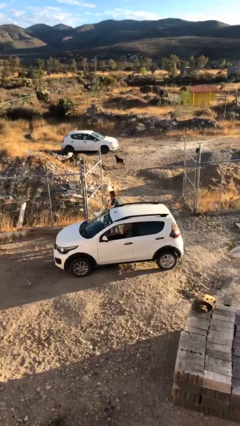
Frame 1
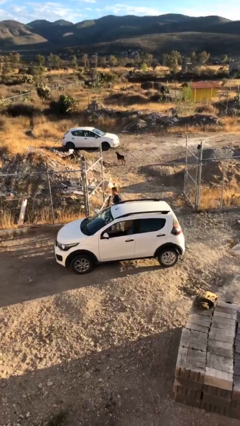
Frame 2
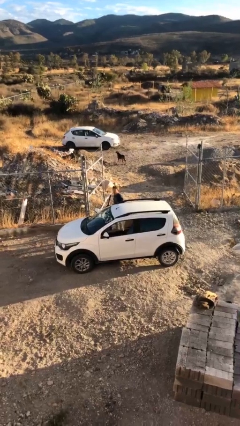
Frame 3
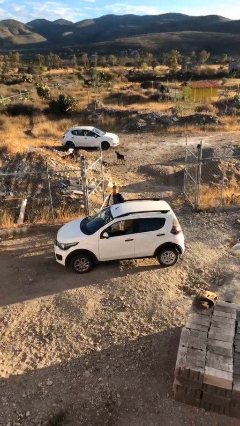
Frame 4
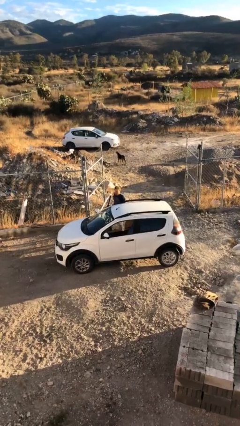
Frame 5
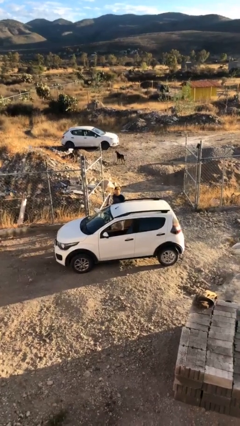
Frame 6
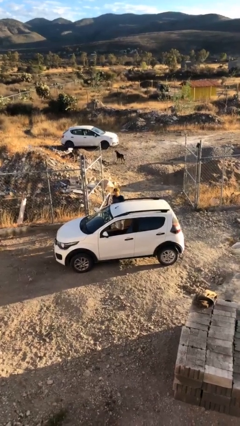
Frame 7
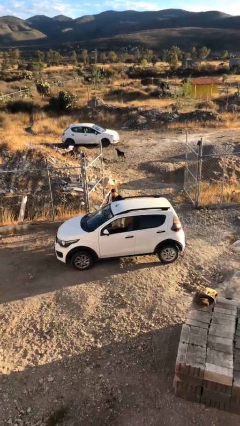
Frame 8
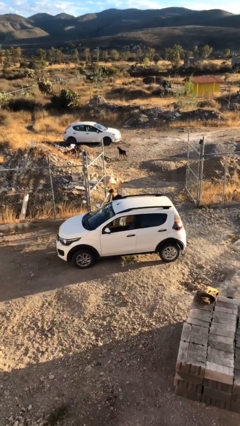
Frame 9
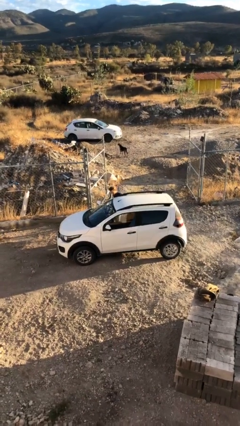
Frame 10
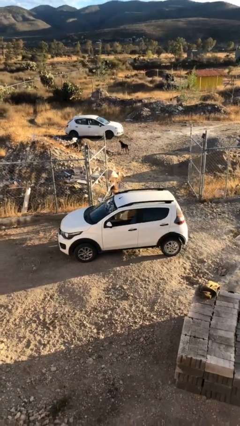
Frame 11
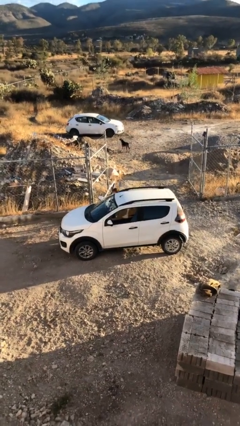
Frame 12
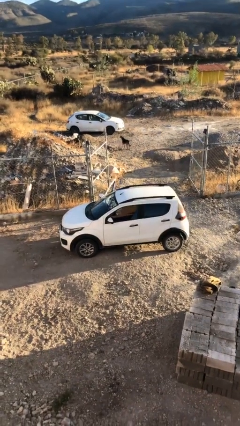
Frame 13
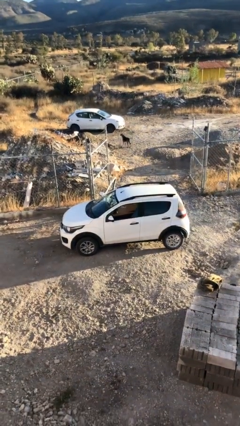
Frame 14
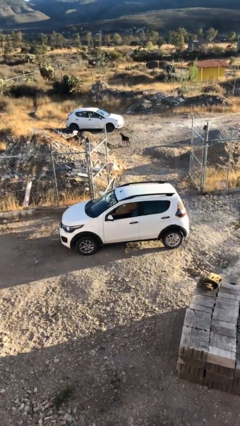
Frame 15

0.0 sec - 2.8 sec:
person enters car

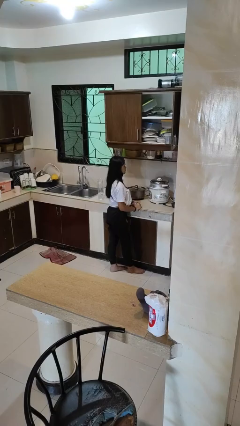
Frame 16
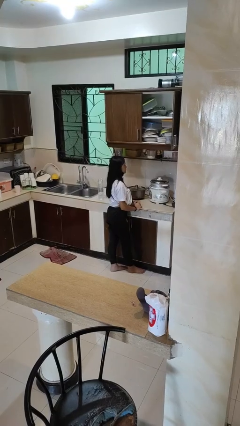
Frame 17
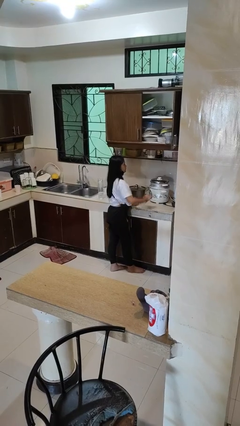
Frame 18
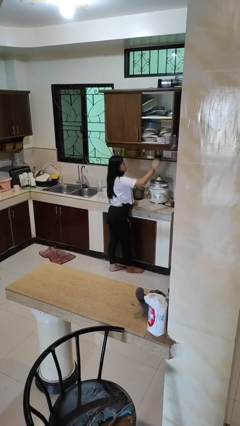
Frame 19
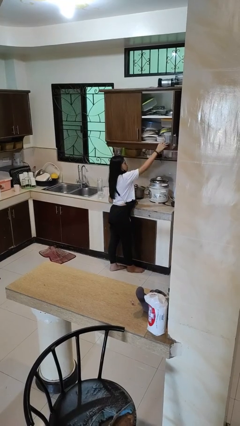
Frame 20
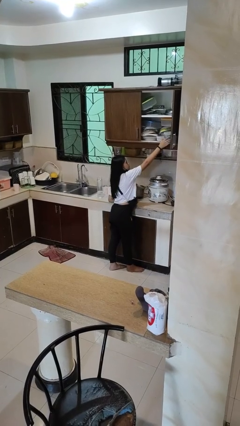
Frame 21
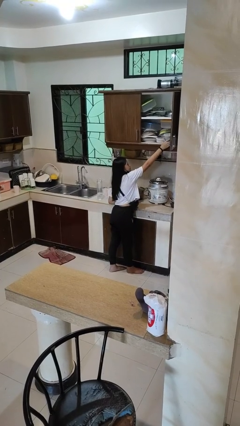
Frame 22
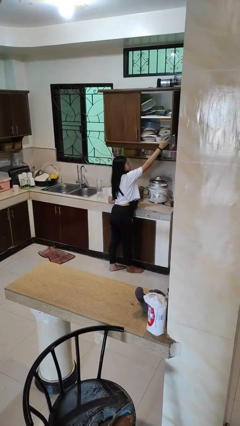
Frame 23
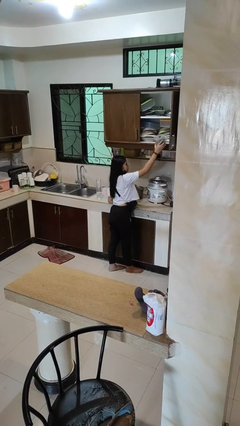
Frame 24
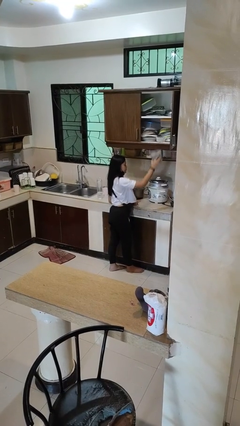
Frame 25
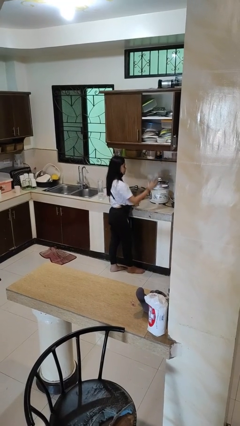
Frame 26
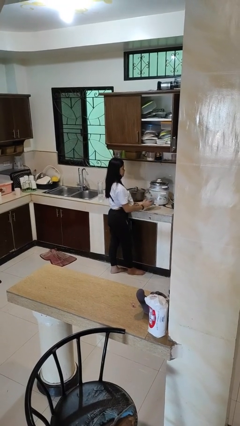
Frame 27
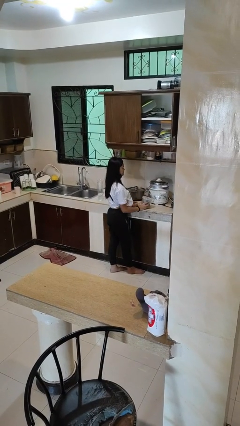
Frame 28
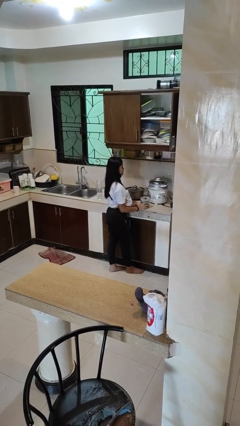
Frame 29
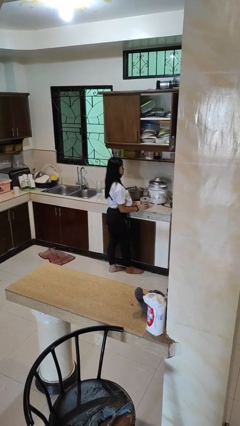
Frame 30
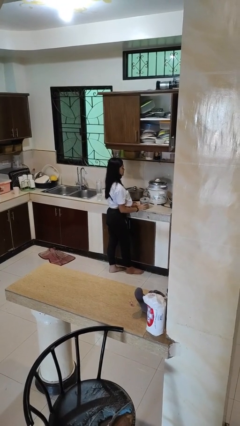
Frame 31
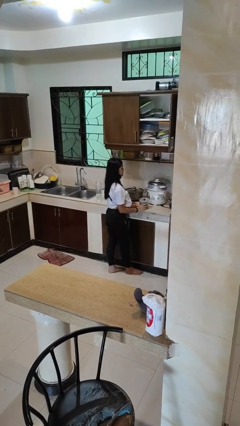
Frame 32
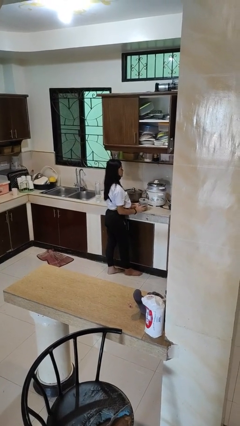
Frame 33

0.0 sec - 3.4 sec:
person picks up object from shelf

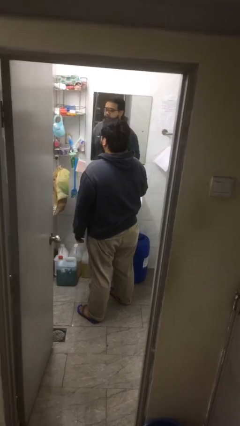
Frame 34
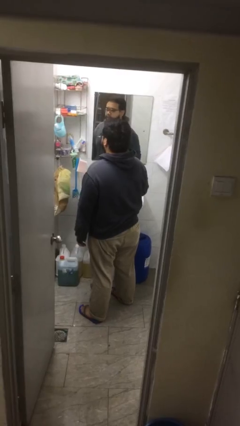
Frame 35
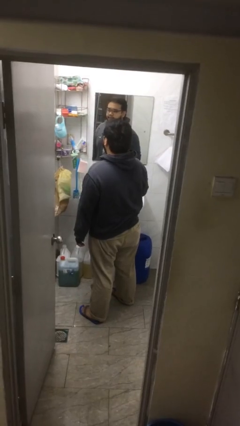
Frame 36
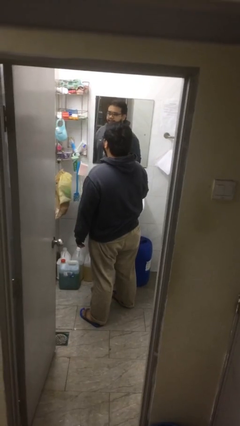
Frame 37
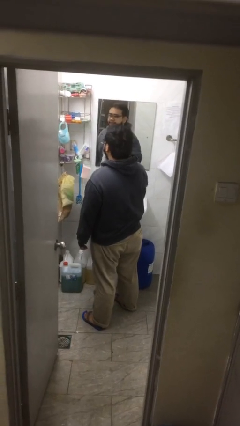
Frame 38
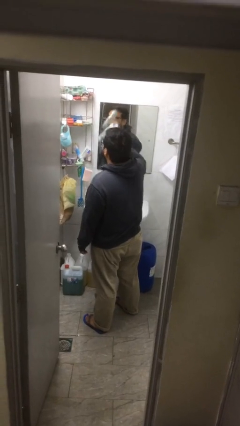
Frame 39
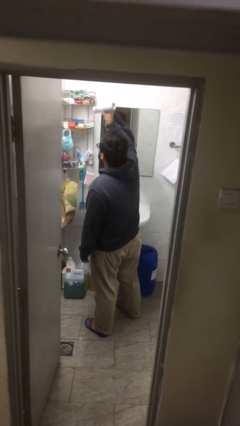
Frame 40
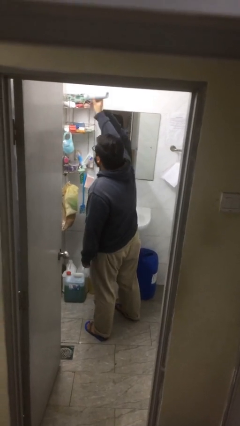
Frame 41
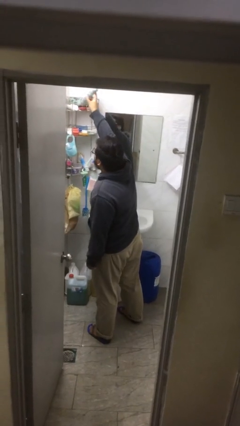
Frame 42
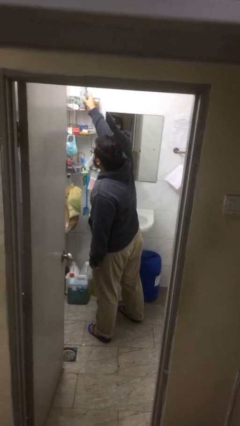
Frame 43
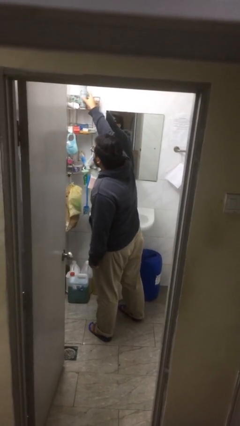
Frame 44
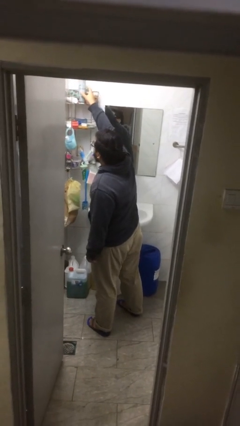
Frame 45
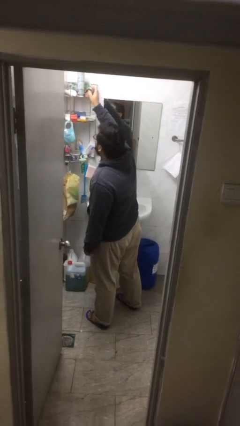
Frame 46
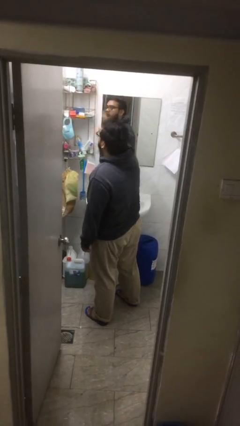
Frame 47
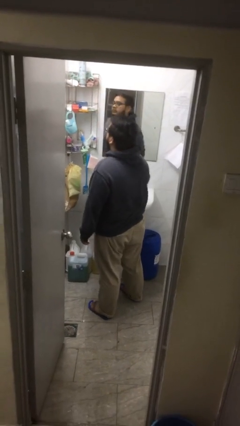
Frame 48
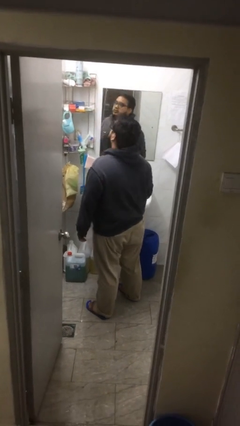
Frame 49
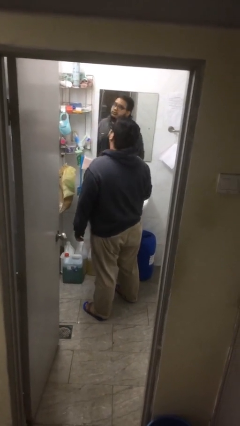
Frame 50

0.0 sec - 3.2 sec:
person puts down object on countertop

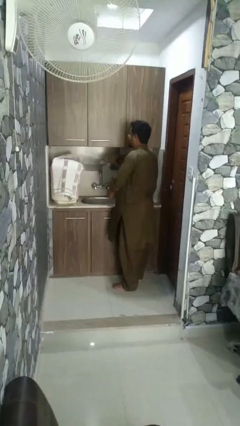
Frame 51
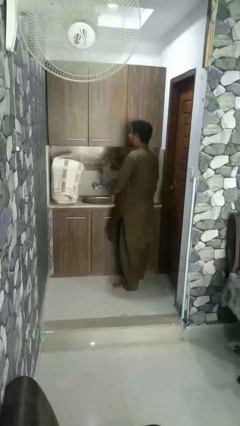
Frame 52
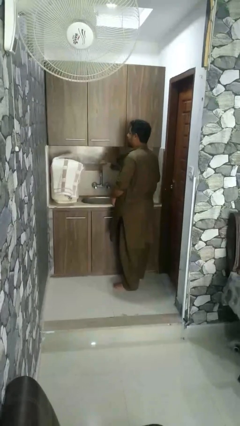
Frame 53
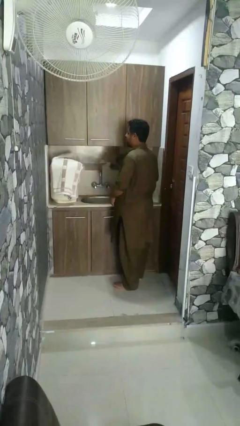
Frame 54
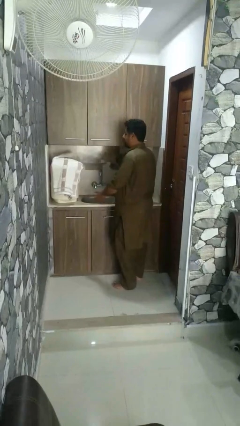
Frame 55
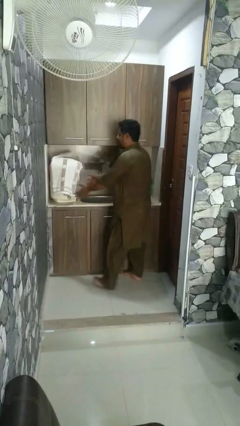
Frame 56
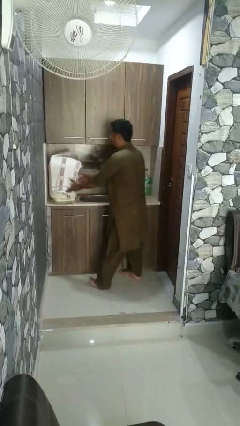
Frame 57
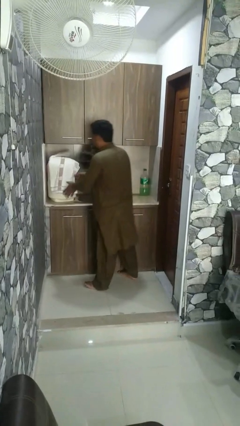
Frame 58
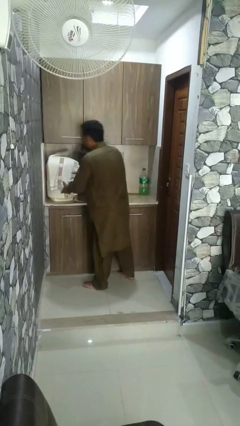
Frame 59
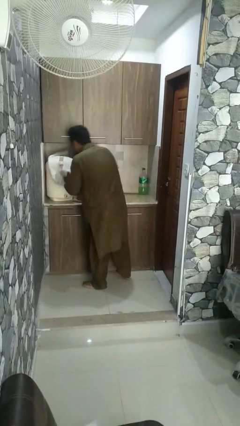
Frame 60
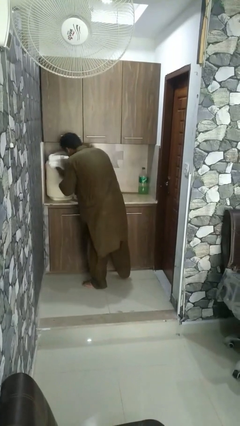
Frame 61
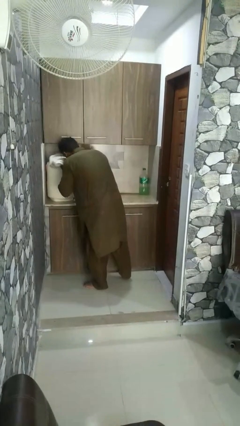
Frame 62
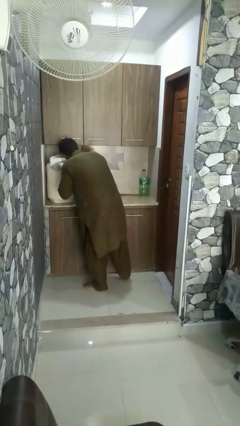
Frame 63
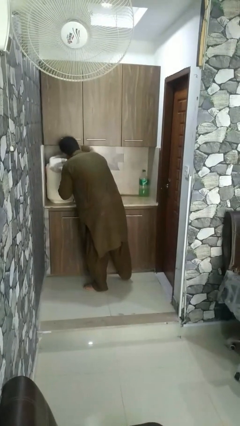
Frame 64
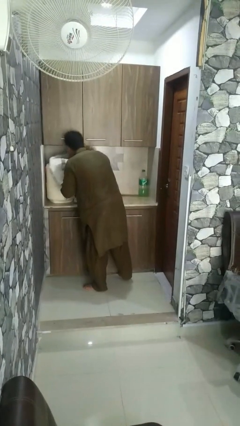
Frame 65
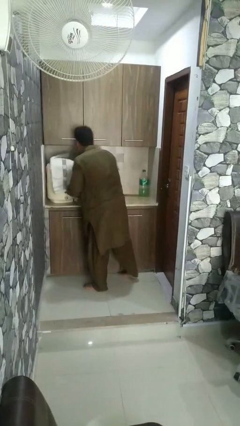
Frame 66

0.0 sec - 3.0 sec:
person dries face with towel

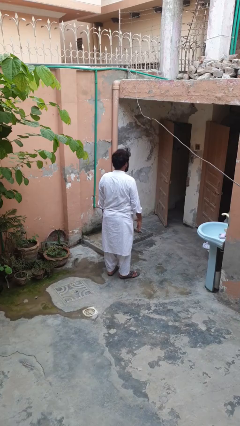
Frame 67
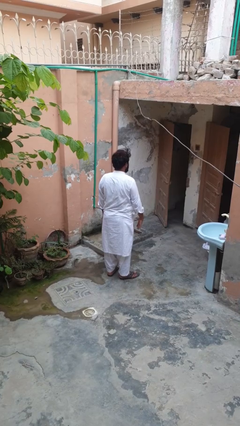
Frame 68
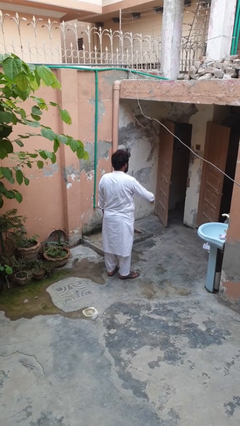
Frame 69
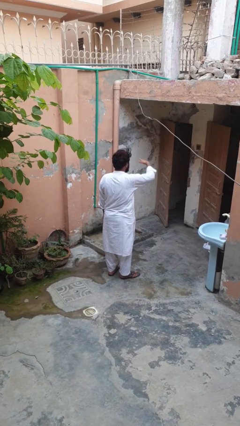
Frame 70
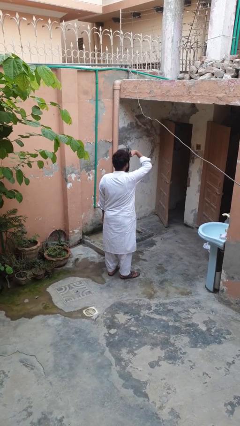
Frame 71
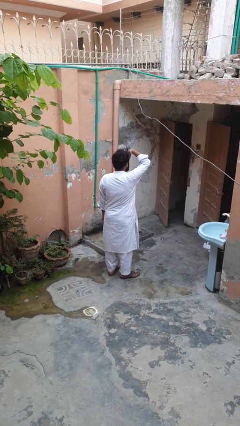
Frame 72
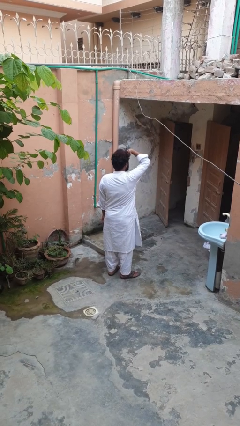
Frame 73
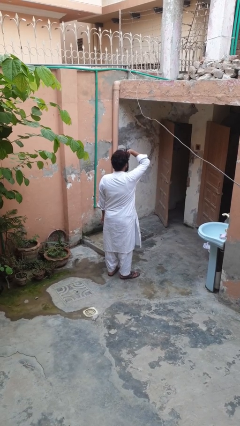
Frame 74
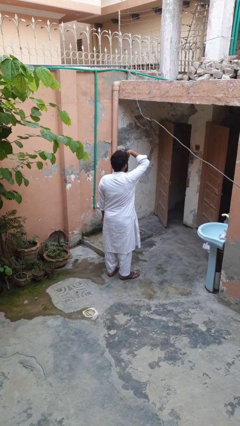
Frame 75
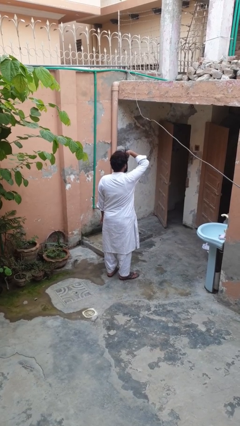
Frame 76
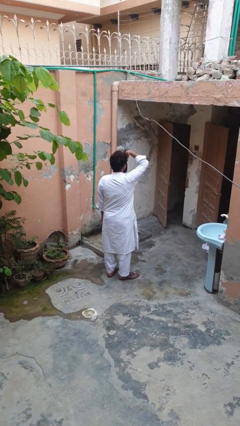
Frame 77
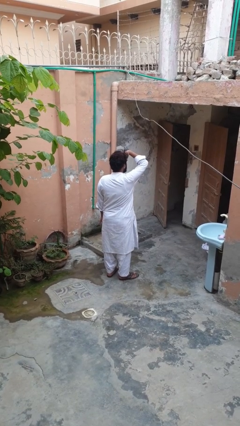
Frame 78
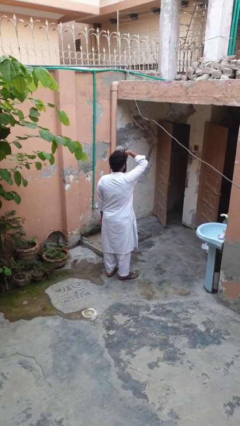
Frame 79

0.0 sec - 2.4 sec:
person shades eyes

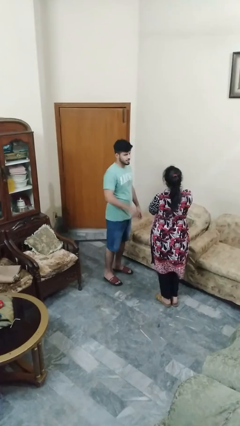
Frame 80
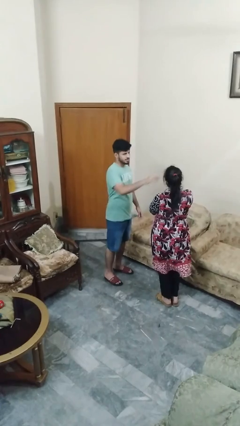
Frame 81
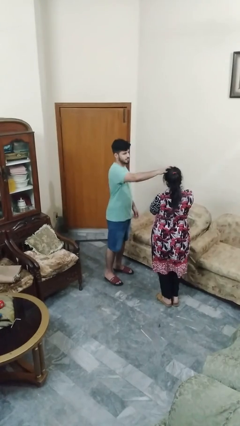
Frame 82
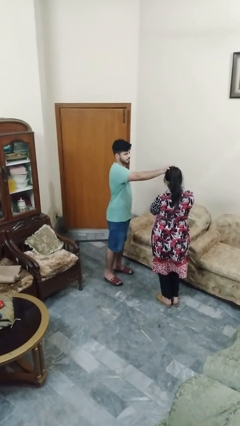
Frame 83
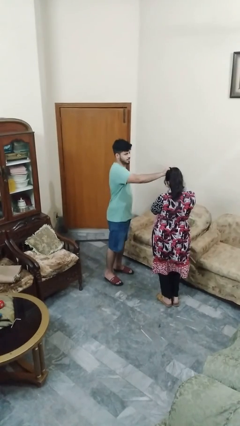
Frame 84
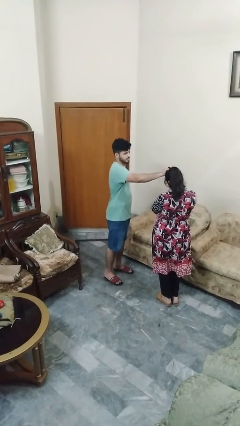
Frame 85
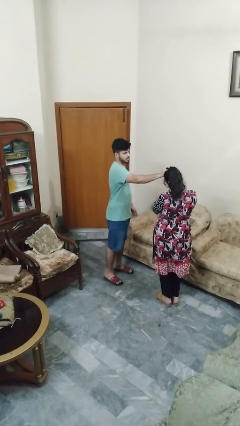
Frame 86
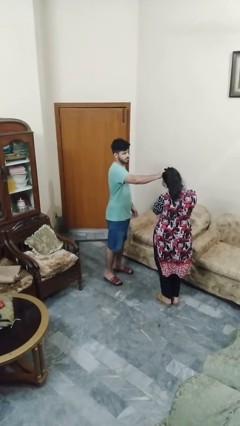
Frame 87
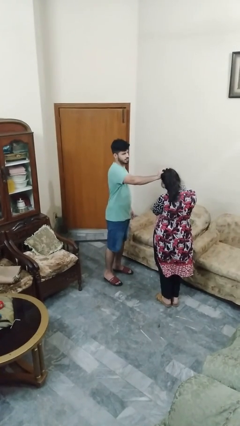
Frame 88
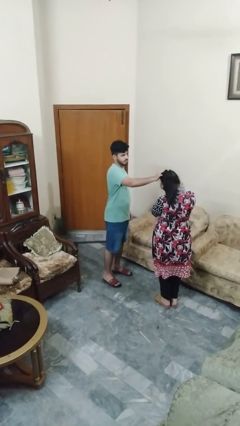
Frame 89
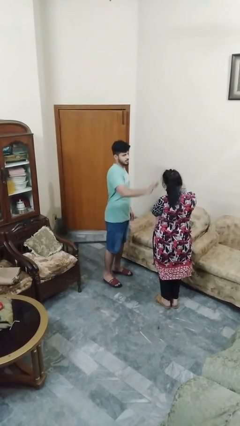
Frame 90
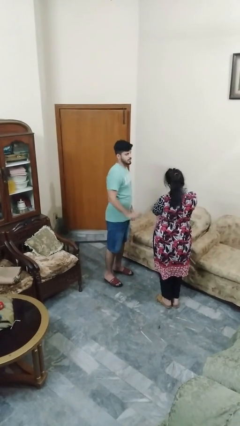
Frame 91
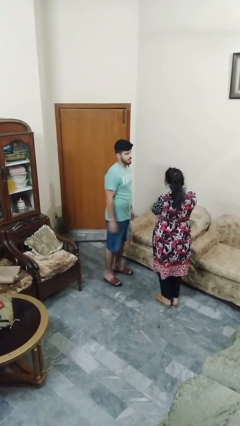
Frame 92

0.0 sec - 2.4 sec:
person grabs person by hair

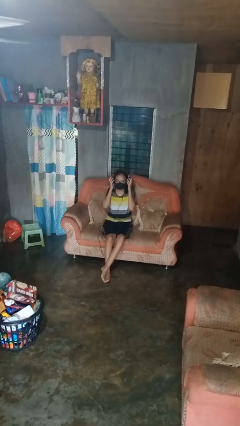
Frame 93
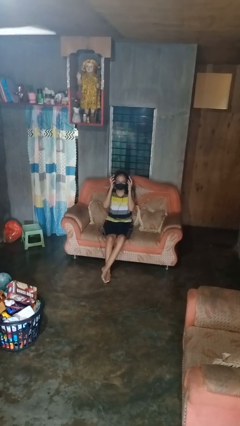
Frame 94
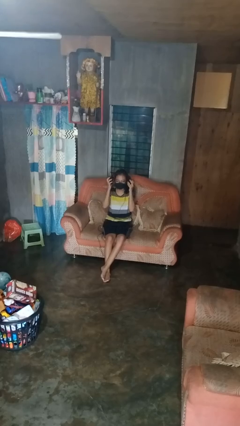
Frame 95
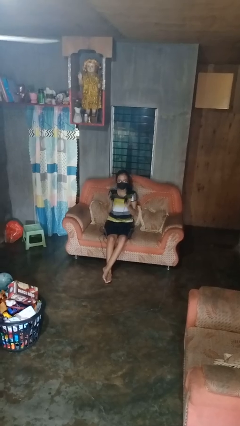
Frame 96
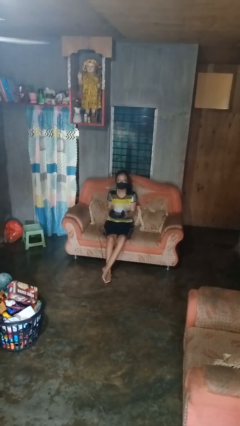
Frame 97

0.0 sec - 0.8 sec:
person takes off headphones
